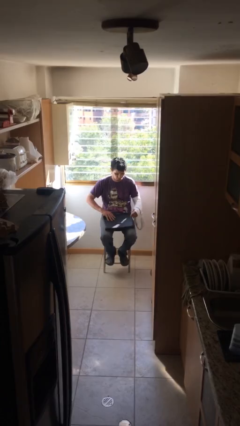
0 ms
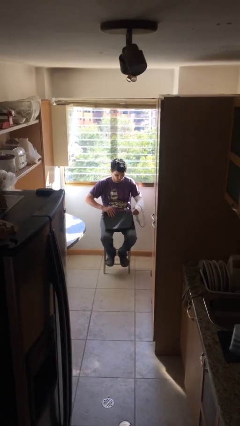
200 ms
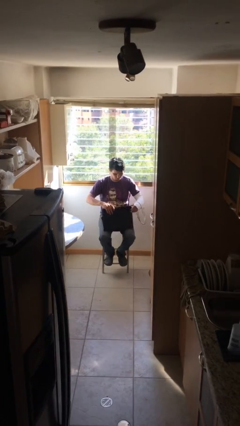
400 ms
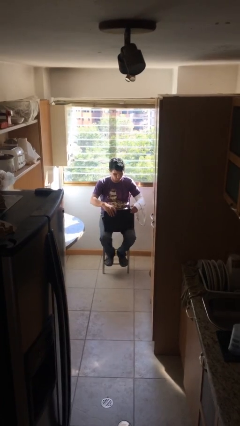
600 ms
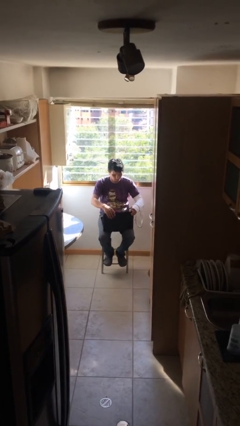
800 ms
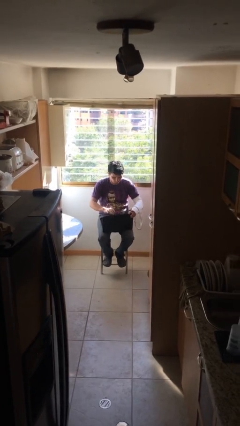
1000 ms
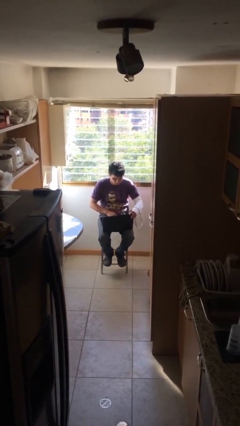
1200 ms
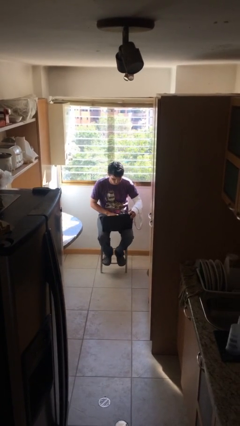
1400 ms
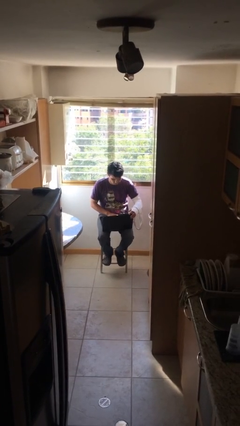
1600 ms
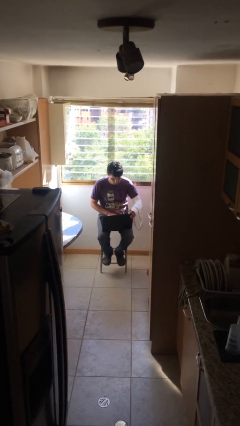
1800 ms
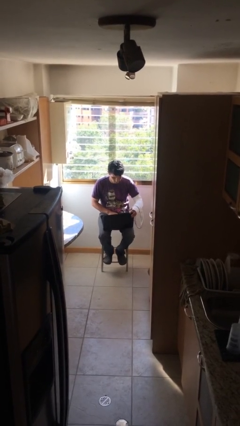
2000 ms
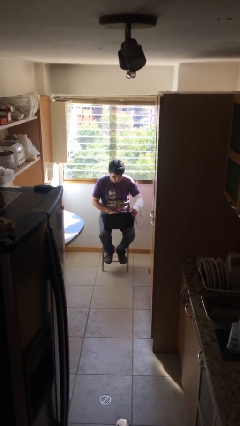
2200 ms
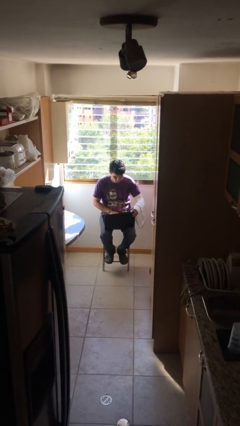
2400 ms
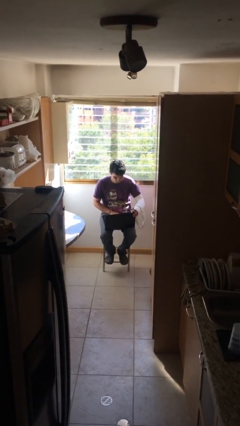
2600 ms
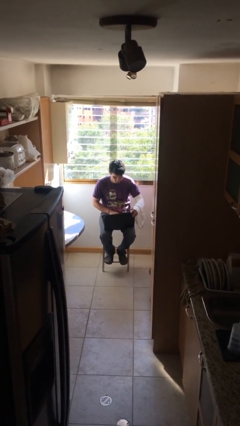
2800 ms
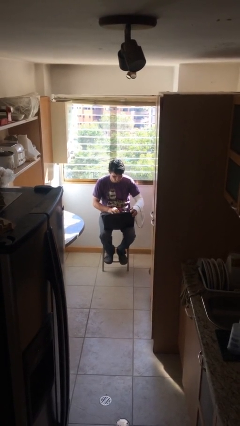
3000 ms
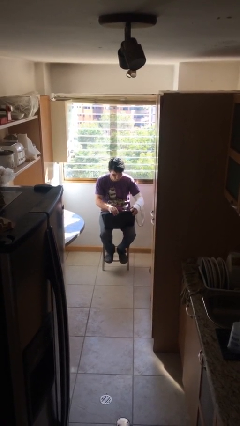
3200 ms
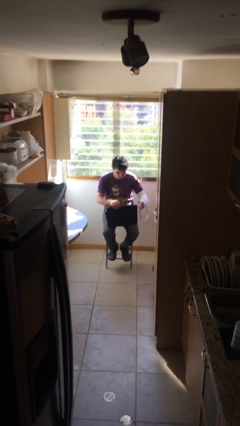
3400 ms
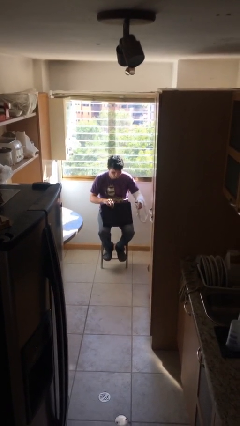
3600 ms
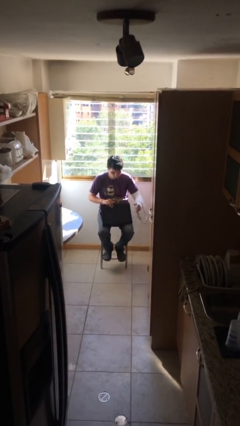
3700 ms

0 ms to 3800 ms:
person interacts with laptop

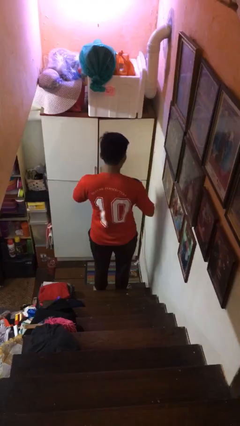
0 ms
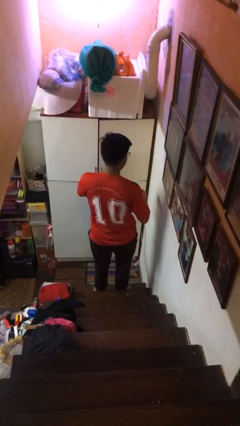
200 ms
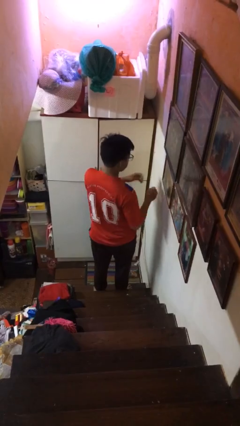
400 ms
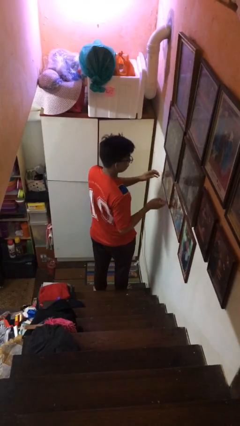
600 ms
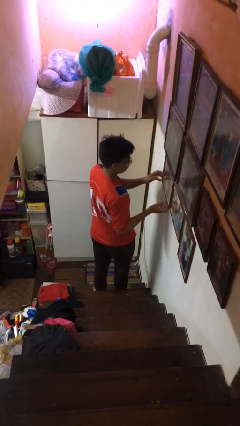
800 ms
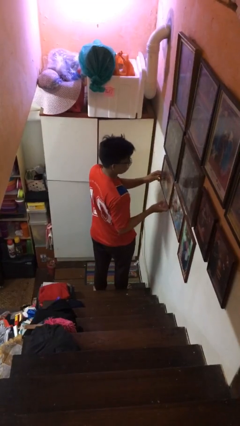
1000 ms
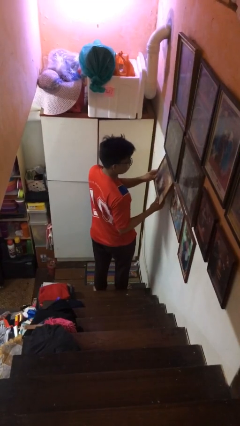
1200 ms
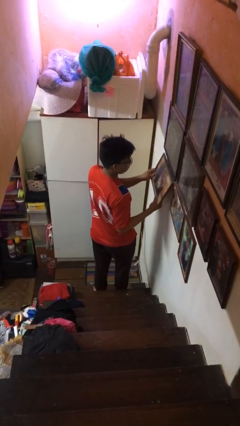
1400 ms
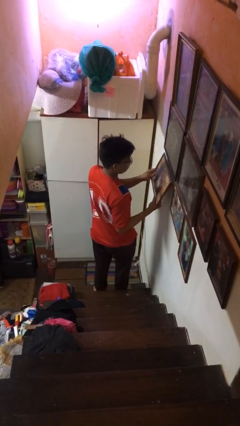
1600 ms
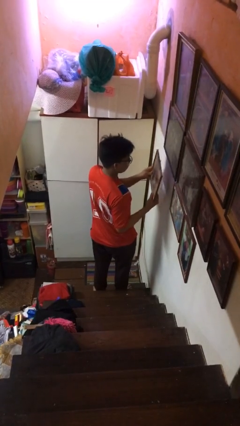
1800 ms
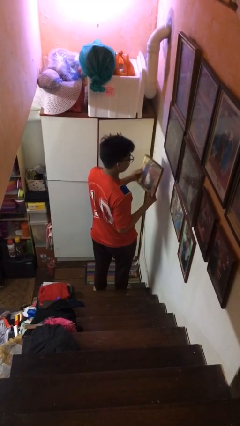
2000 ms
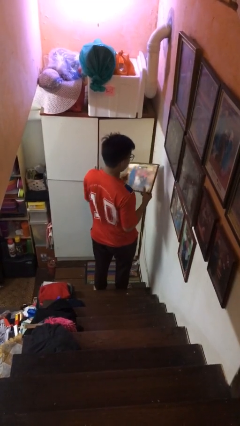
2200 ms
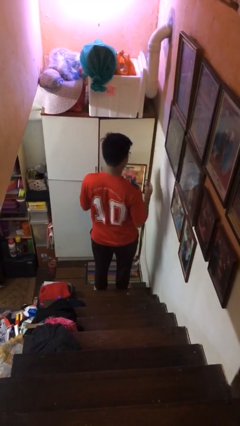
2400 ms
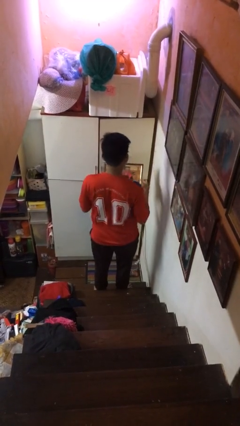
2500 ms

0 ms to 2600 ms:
person takes down picture frame

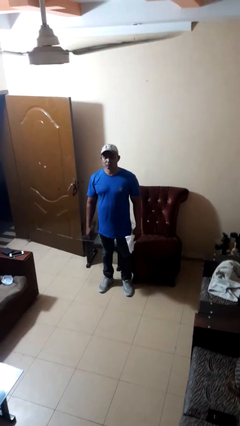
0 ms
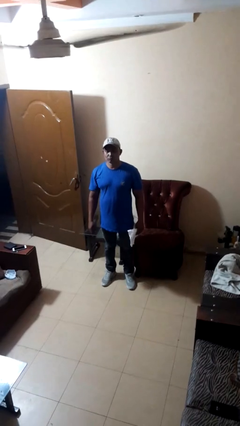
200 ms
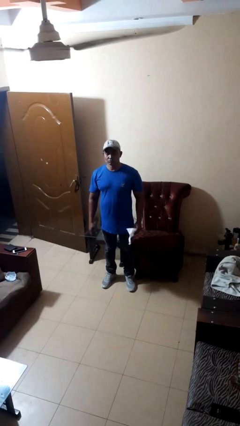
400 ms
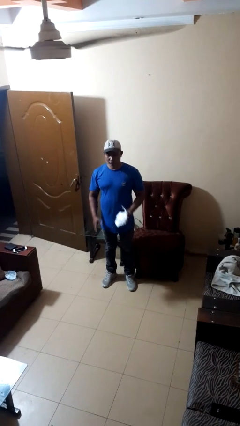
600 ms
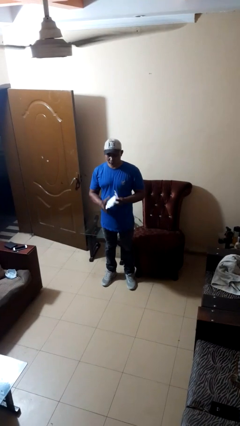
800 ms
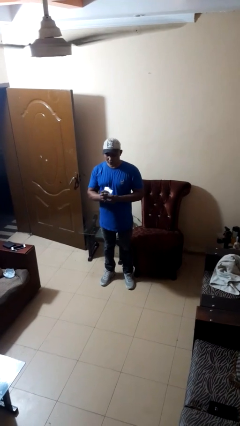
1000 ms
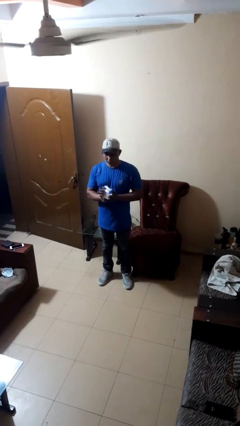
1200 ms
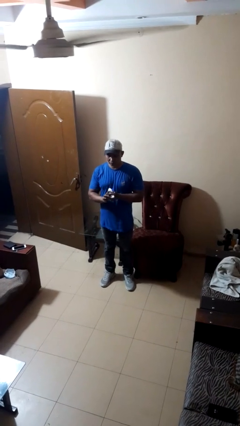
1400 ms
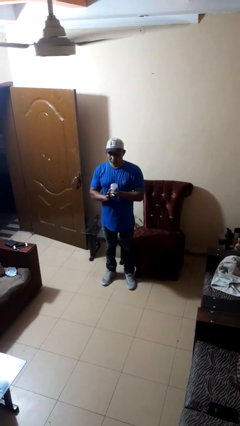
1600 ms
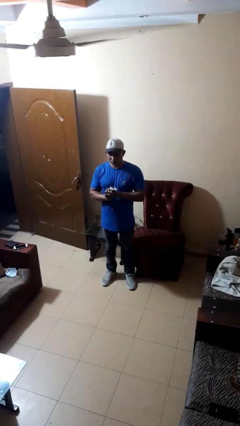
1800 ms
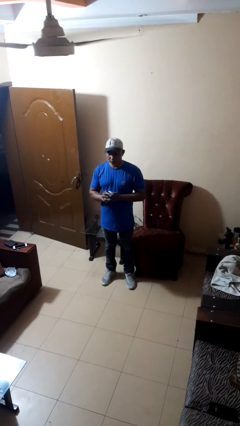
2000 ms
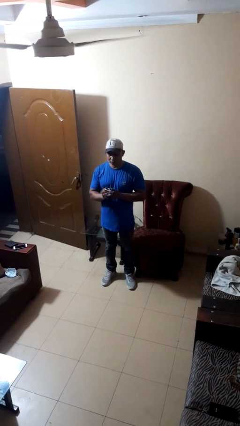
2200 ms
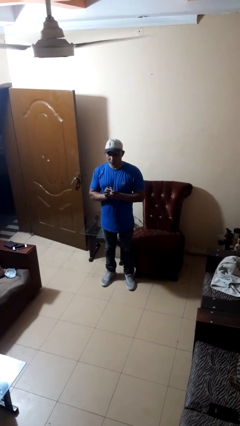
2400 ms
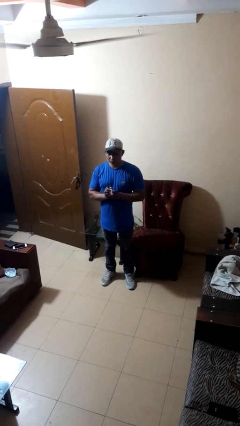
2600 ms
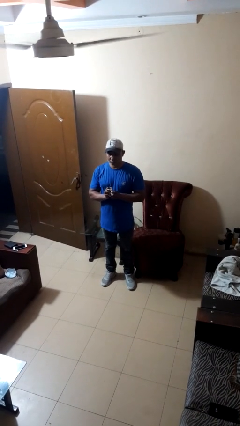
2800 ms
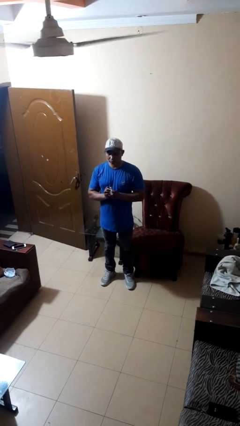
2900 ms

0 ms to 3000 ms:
person crumples paper

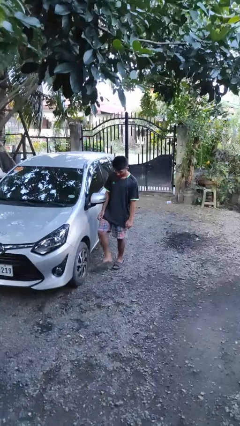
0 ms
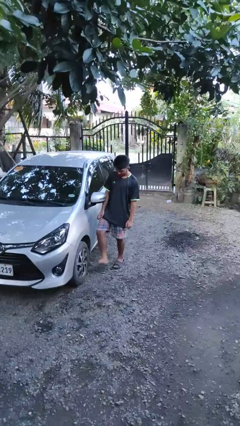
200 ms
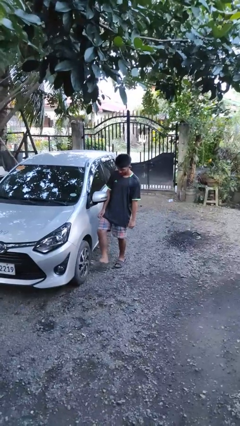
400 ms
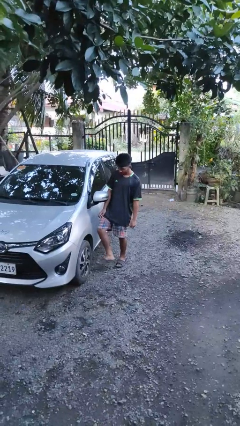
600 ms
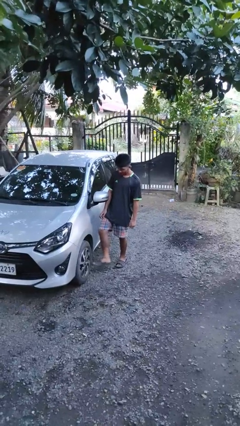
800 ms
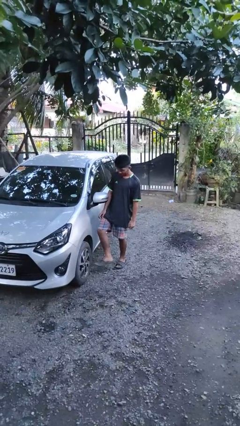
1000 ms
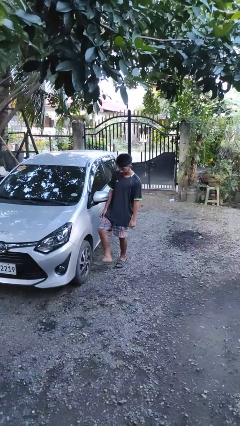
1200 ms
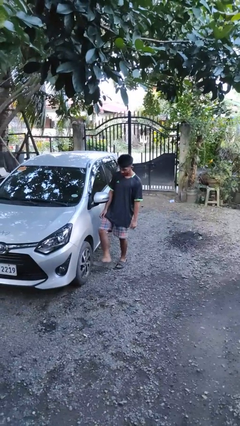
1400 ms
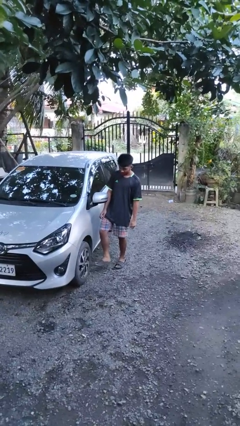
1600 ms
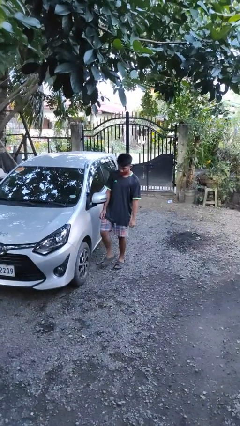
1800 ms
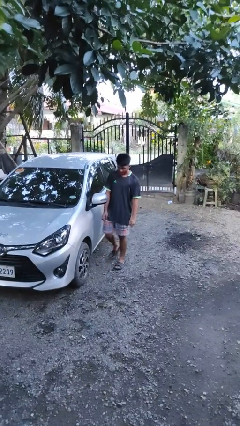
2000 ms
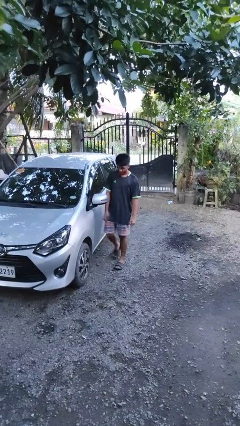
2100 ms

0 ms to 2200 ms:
person kicks car tires

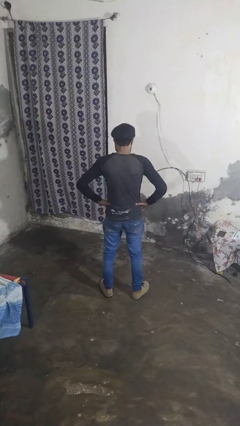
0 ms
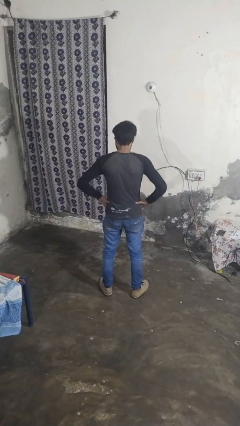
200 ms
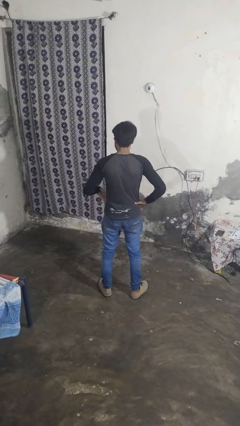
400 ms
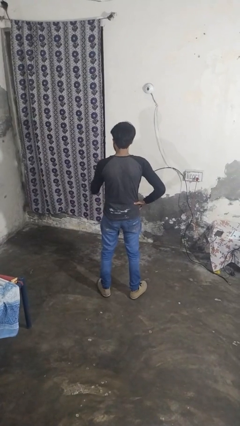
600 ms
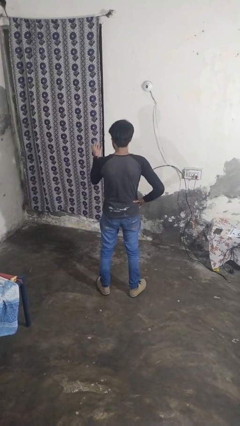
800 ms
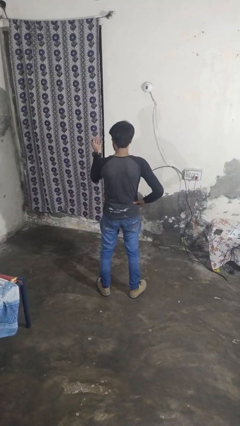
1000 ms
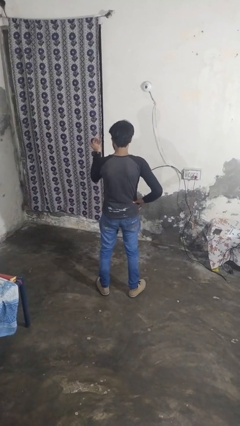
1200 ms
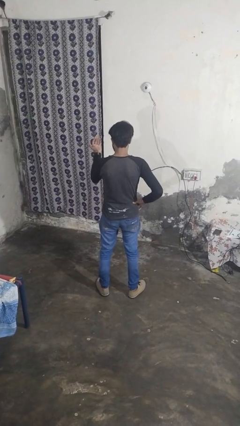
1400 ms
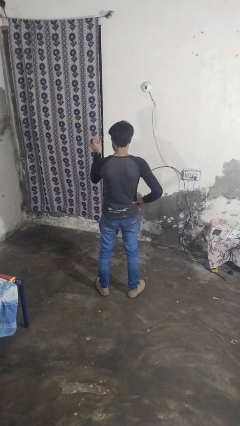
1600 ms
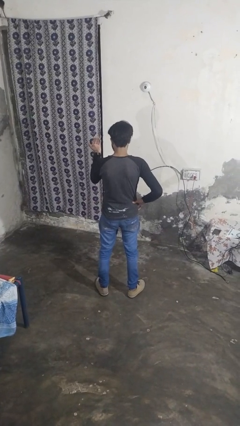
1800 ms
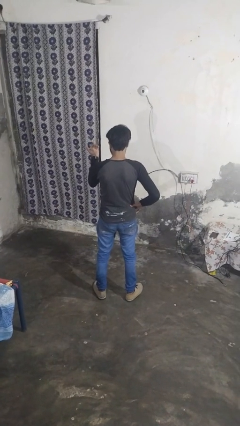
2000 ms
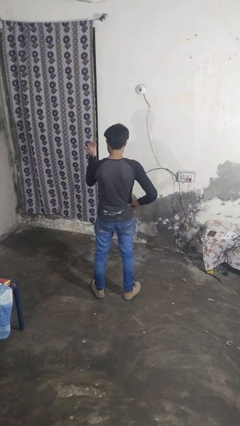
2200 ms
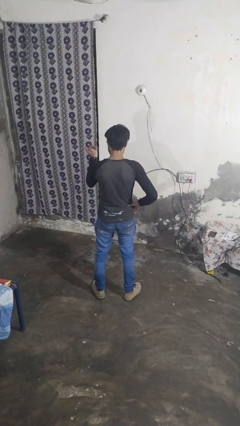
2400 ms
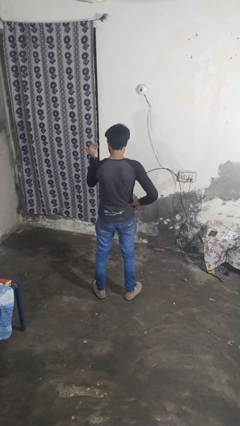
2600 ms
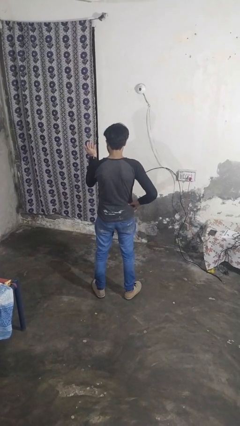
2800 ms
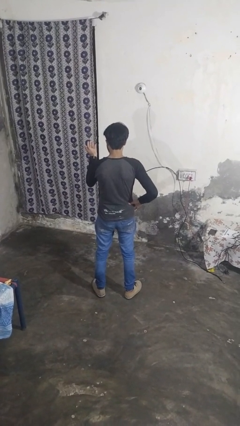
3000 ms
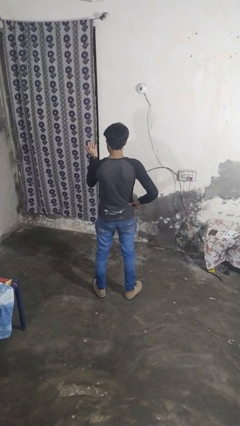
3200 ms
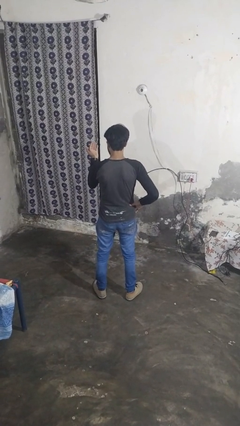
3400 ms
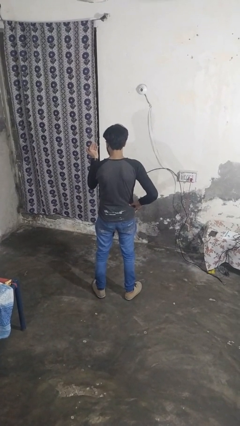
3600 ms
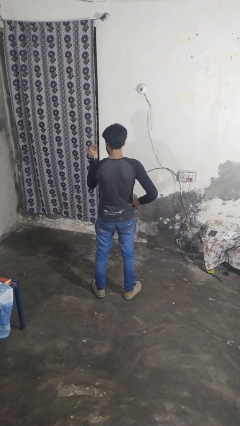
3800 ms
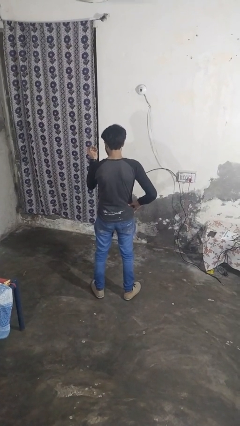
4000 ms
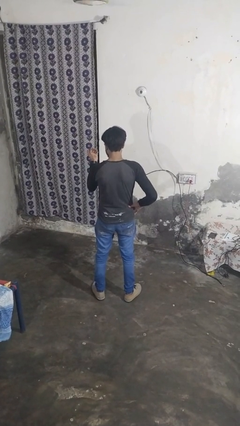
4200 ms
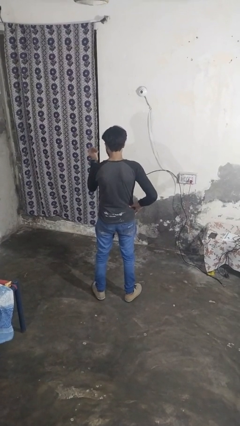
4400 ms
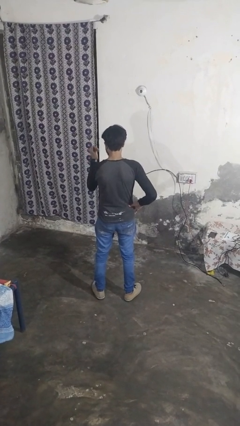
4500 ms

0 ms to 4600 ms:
person gestures come here

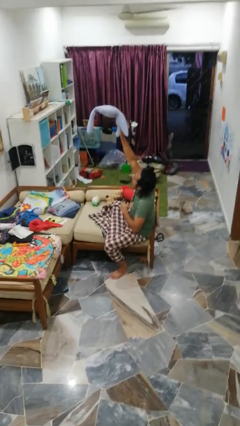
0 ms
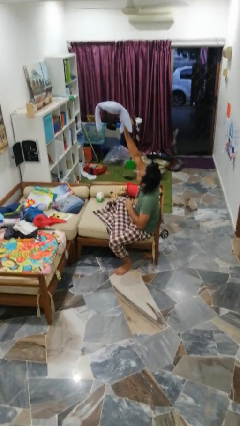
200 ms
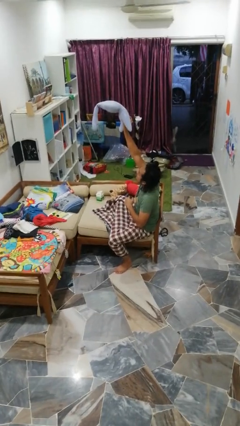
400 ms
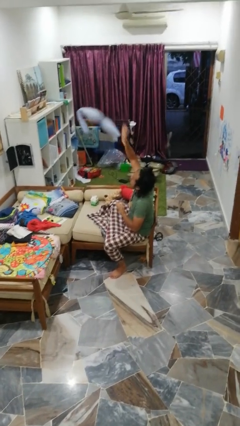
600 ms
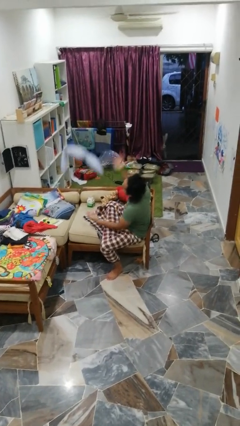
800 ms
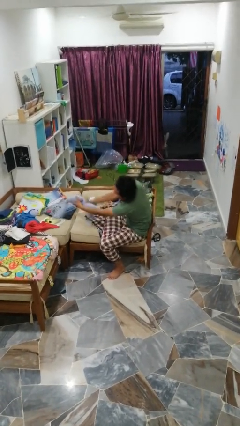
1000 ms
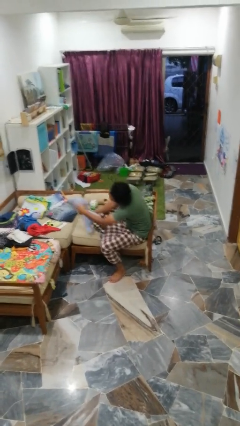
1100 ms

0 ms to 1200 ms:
person drops object
